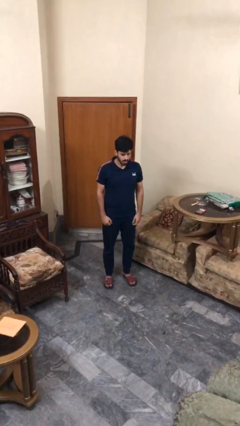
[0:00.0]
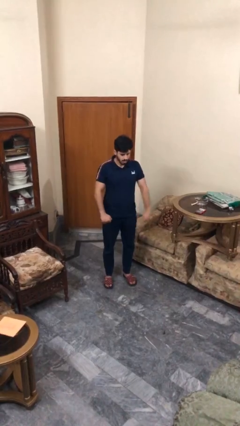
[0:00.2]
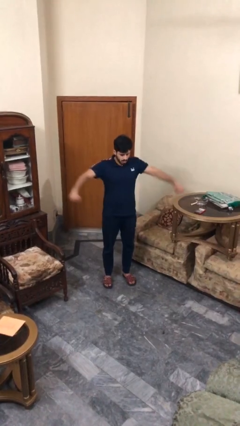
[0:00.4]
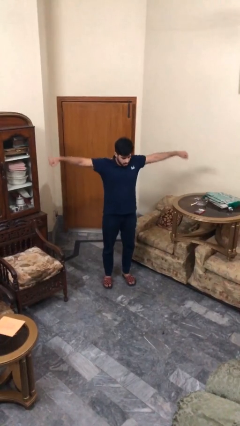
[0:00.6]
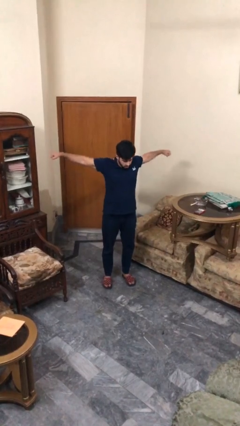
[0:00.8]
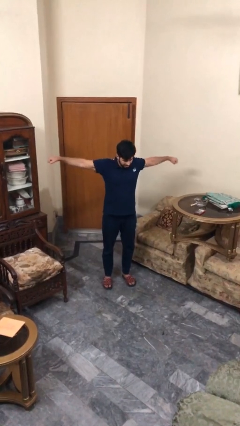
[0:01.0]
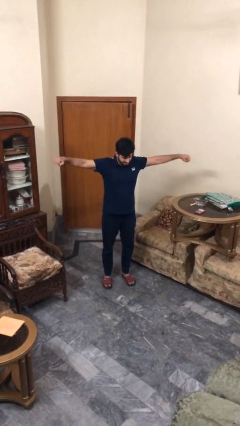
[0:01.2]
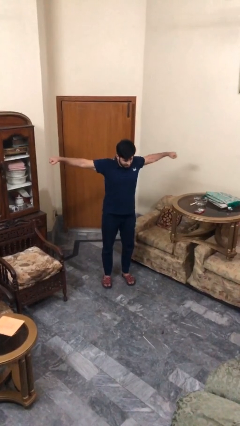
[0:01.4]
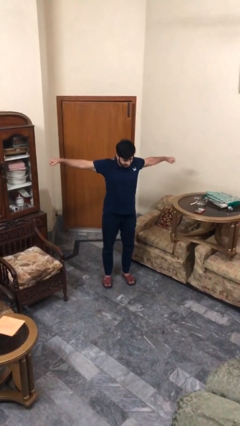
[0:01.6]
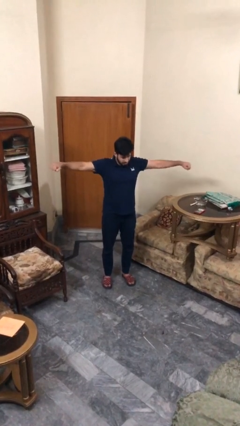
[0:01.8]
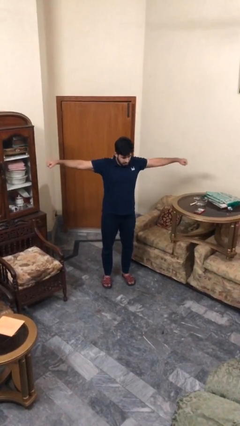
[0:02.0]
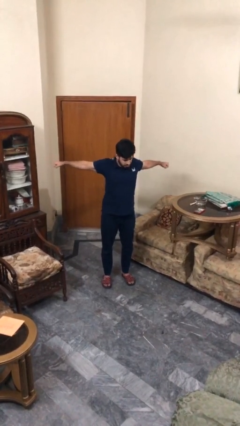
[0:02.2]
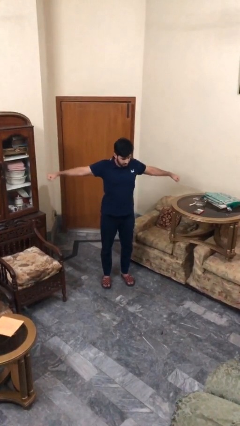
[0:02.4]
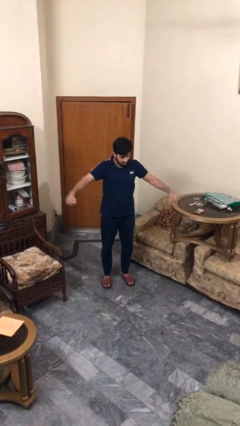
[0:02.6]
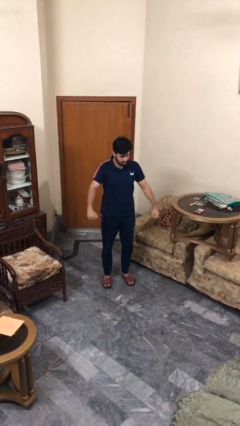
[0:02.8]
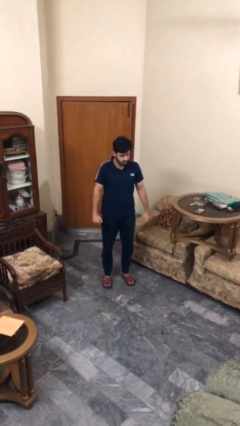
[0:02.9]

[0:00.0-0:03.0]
person stretches arms to side

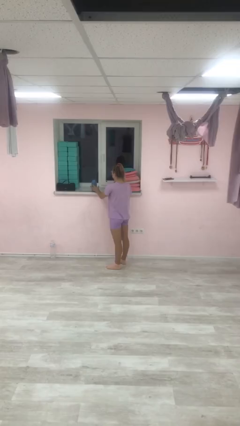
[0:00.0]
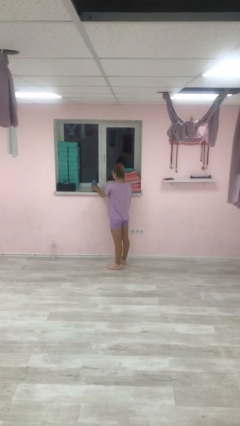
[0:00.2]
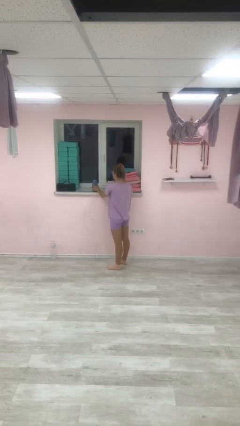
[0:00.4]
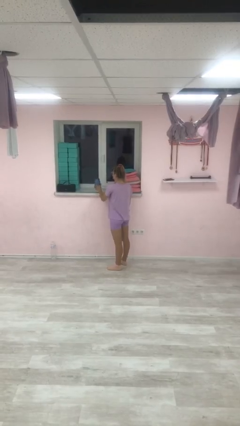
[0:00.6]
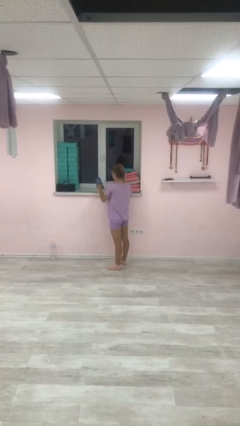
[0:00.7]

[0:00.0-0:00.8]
person picks up object from countertop

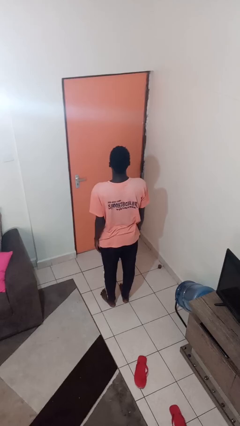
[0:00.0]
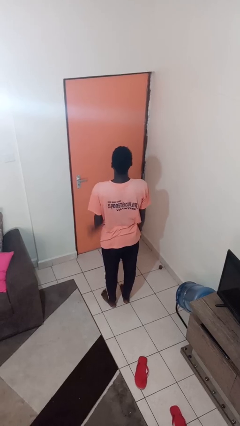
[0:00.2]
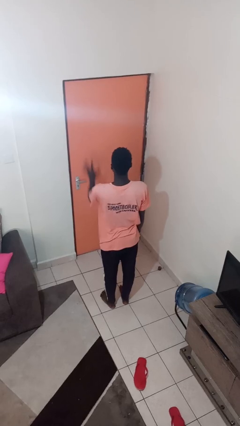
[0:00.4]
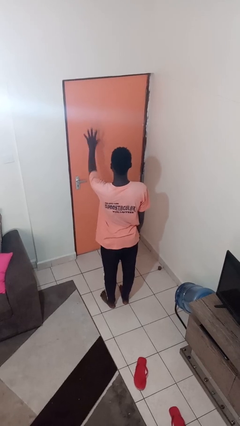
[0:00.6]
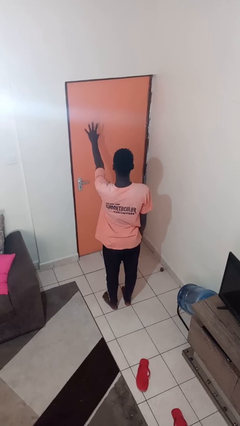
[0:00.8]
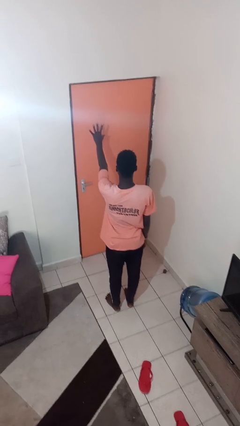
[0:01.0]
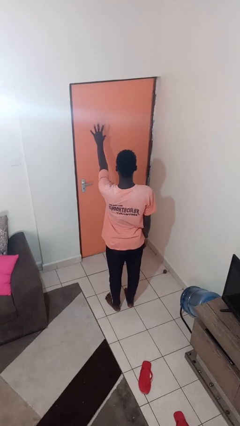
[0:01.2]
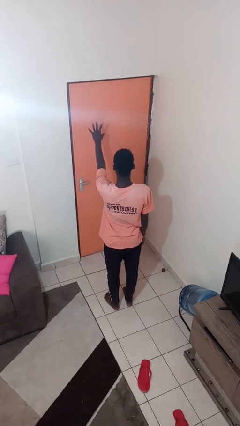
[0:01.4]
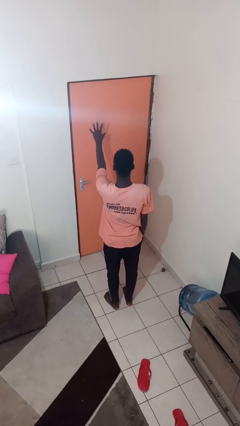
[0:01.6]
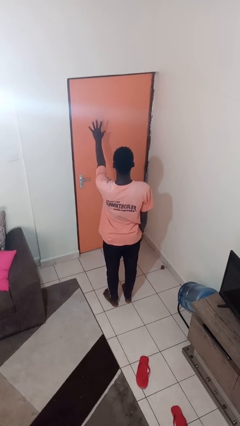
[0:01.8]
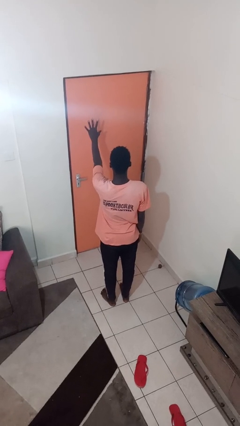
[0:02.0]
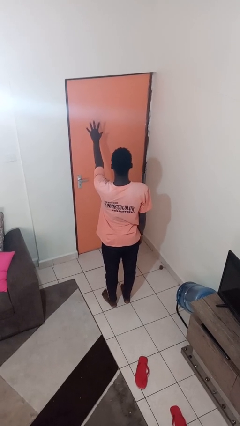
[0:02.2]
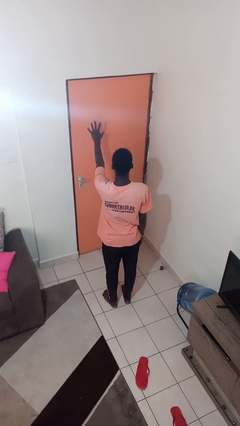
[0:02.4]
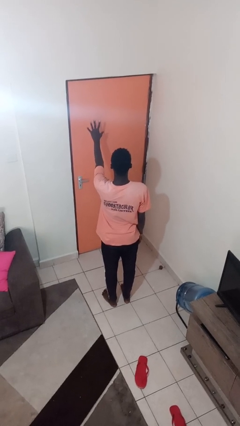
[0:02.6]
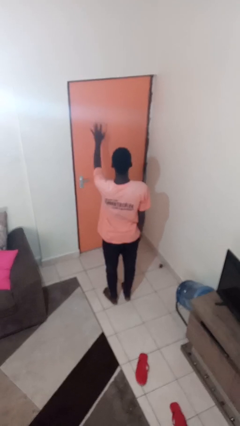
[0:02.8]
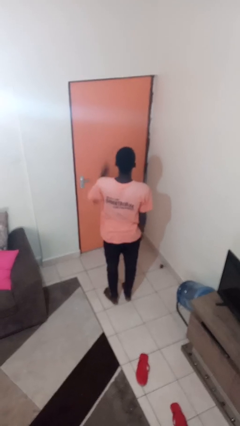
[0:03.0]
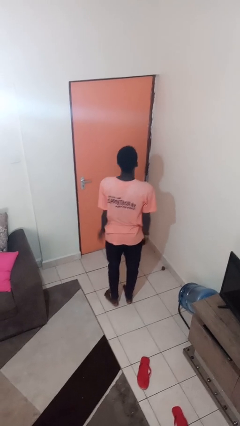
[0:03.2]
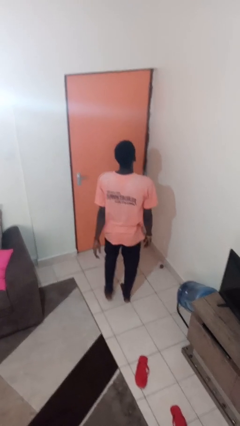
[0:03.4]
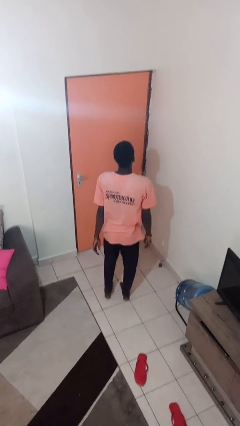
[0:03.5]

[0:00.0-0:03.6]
person gestures number five

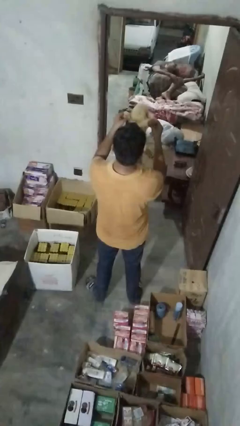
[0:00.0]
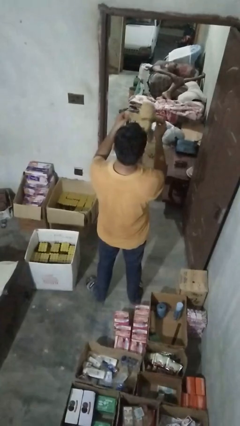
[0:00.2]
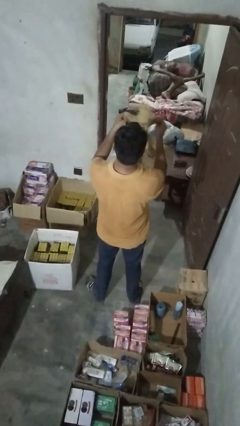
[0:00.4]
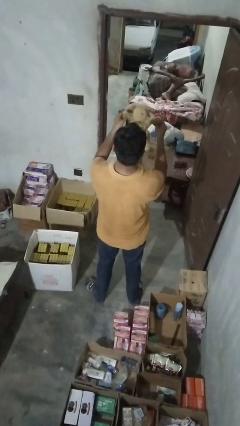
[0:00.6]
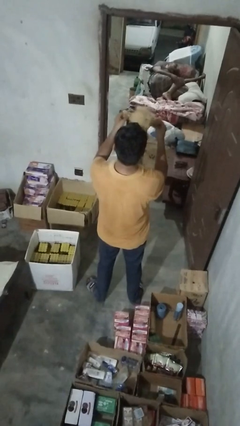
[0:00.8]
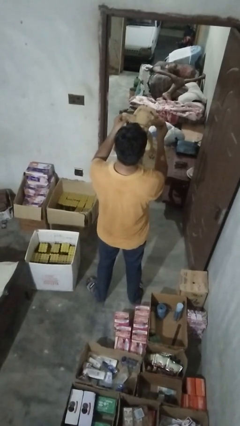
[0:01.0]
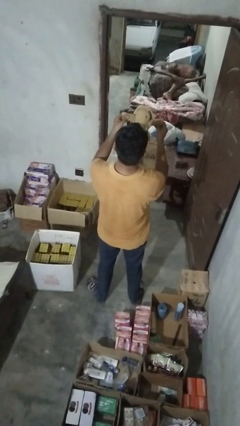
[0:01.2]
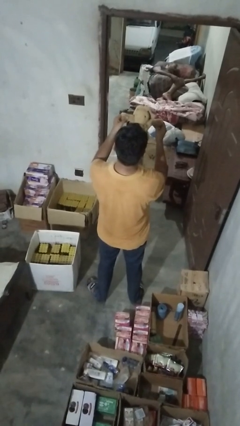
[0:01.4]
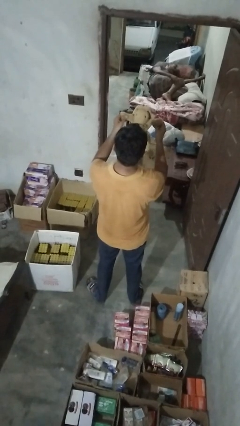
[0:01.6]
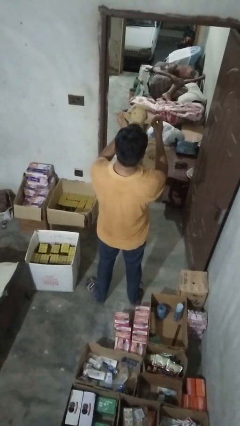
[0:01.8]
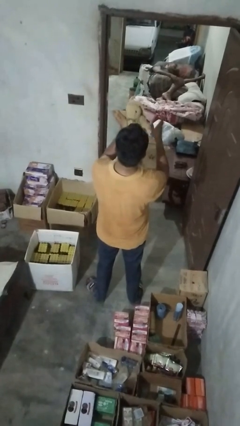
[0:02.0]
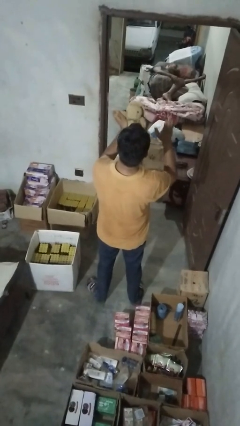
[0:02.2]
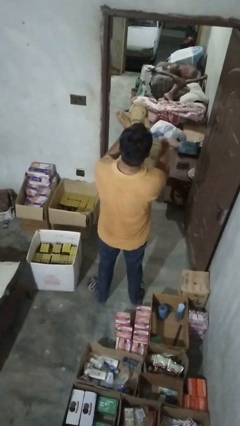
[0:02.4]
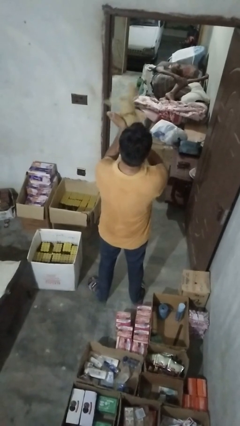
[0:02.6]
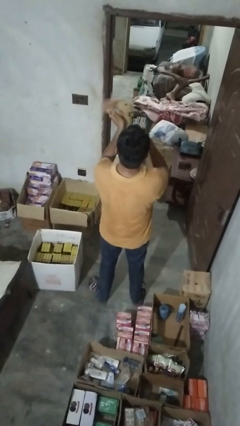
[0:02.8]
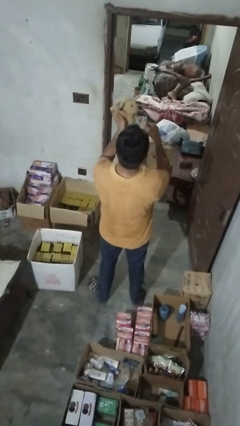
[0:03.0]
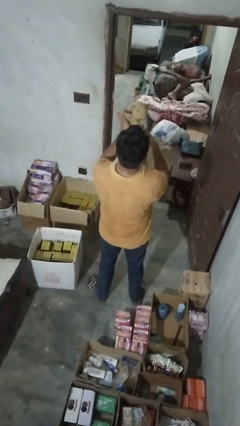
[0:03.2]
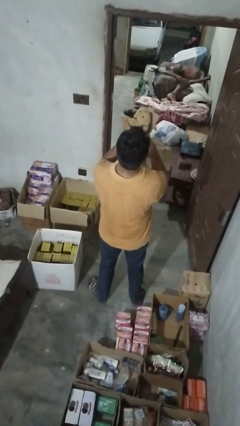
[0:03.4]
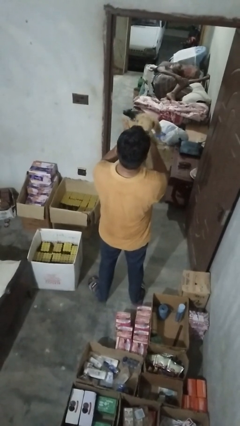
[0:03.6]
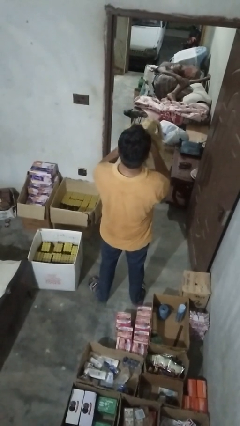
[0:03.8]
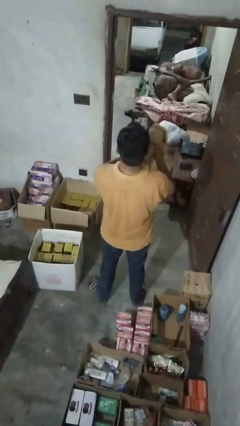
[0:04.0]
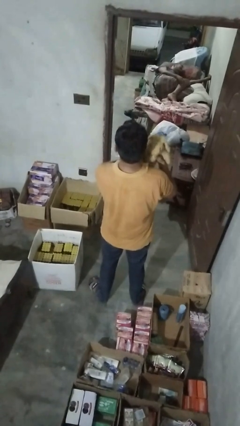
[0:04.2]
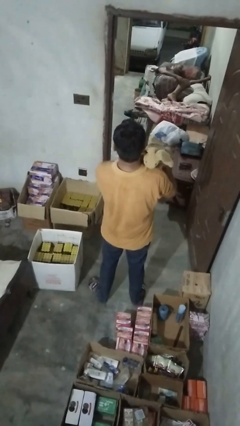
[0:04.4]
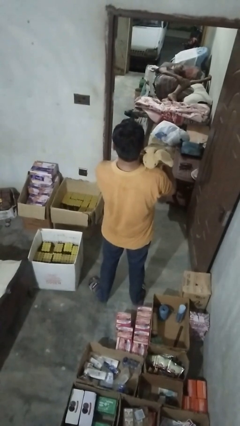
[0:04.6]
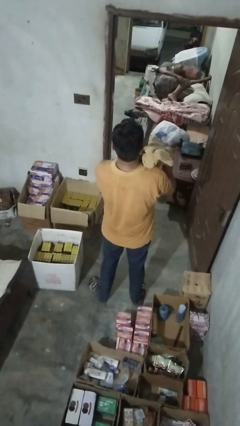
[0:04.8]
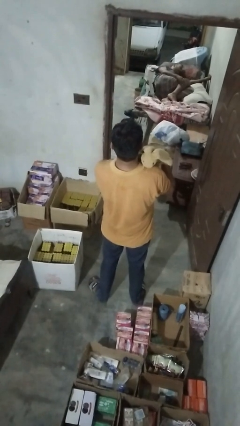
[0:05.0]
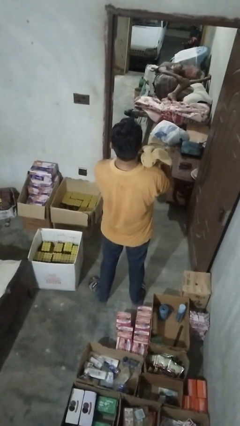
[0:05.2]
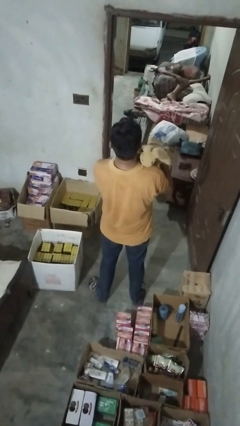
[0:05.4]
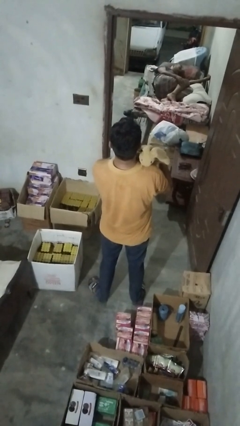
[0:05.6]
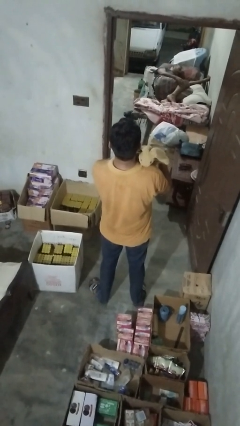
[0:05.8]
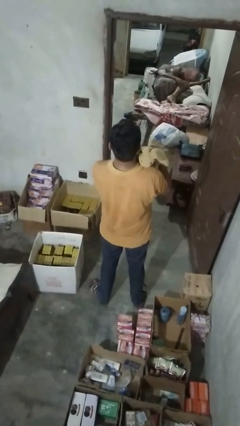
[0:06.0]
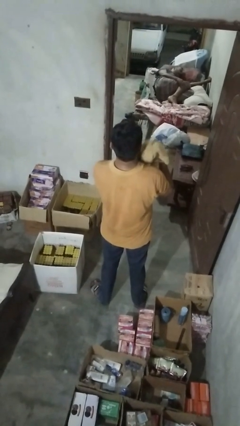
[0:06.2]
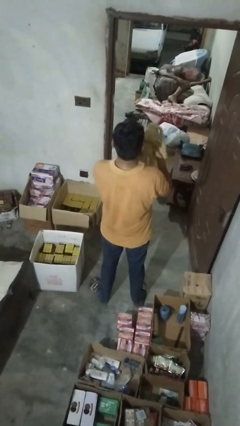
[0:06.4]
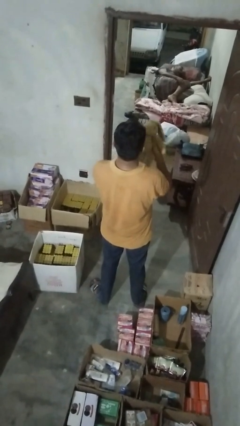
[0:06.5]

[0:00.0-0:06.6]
person hugs stuffed animal

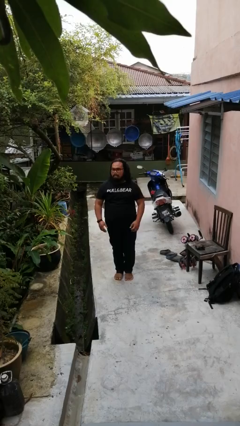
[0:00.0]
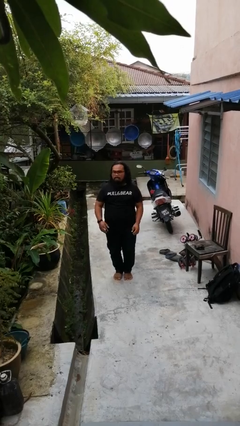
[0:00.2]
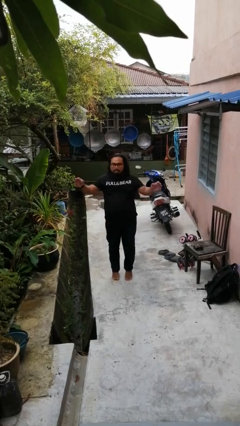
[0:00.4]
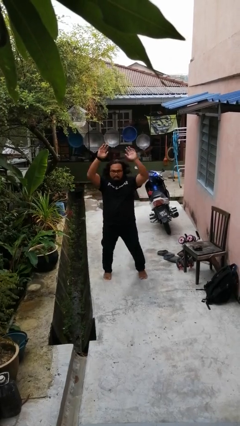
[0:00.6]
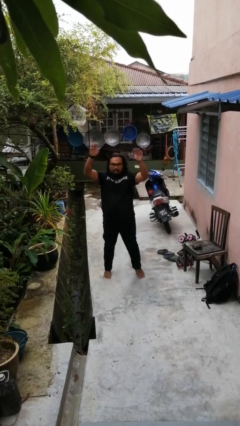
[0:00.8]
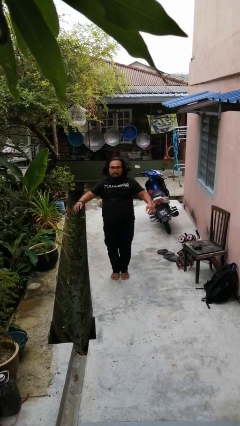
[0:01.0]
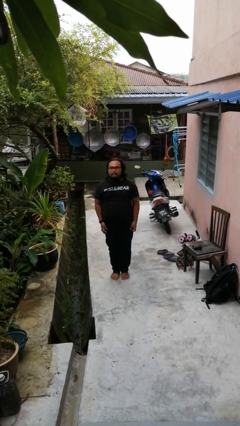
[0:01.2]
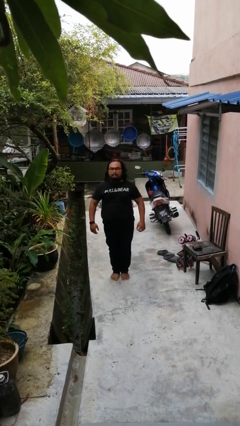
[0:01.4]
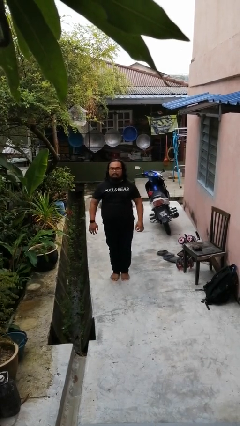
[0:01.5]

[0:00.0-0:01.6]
person exercises with jumping jacks

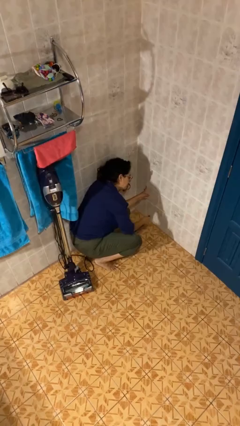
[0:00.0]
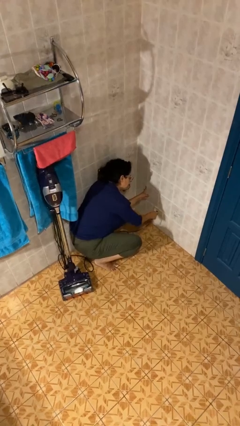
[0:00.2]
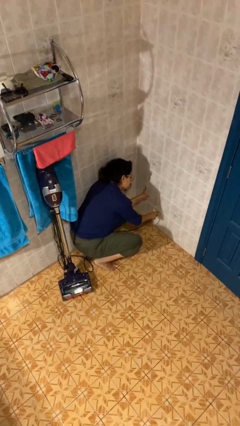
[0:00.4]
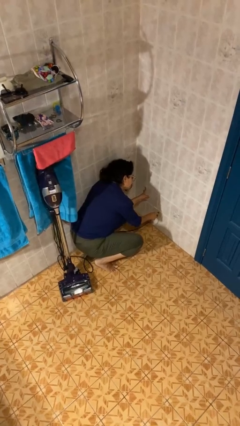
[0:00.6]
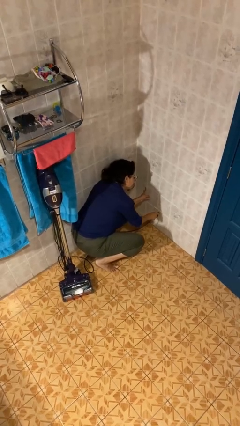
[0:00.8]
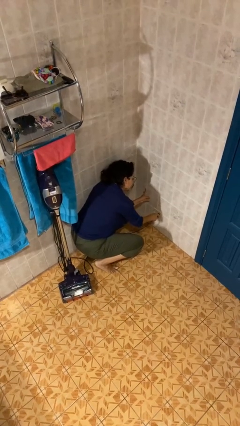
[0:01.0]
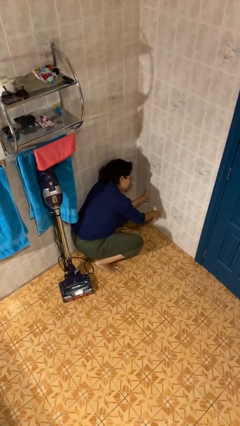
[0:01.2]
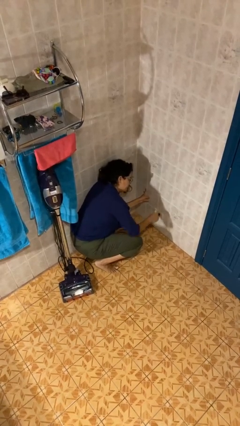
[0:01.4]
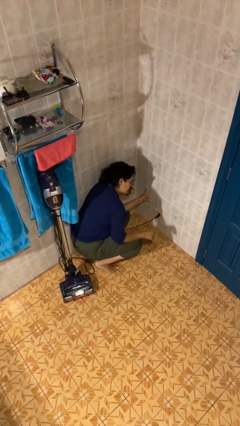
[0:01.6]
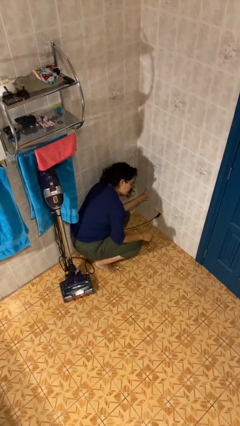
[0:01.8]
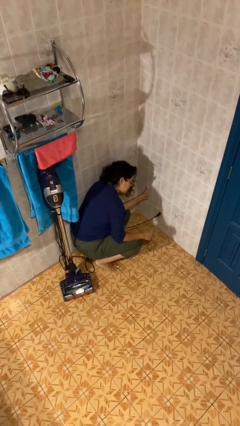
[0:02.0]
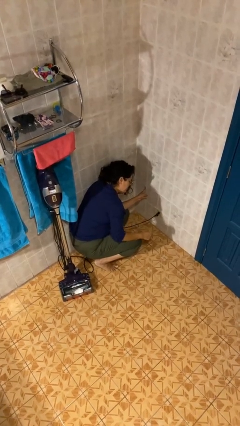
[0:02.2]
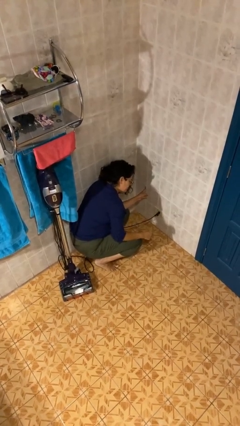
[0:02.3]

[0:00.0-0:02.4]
person plugs into electrical socket
